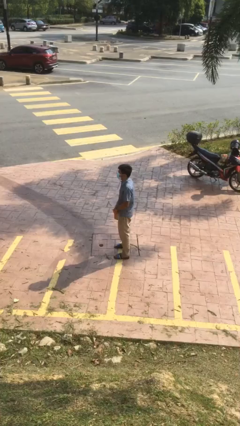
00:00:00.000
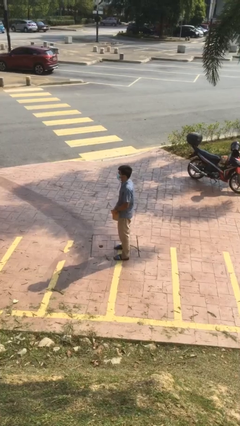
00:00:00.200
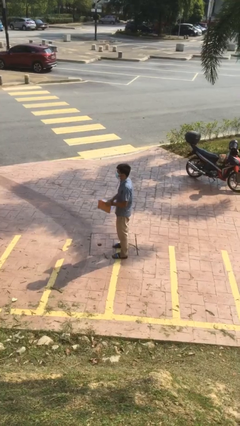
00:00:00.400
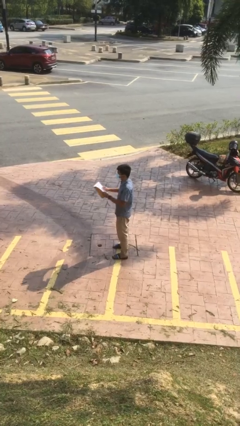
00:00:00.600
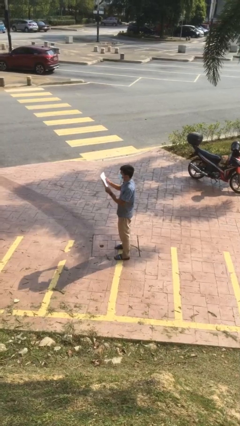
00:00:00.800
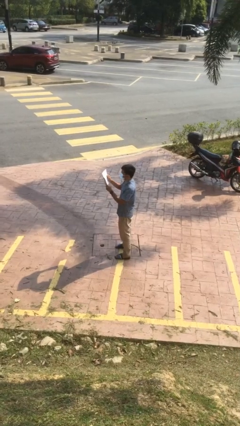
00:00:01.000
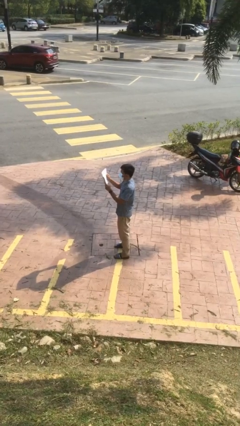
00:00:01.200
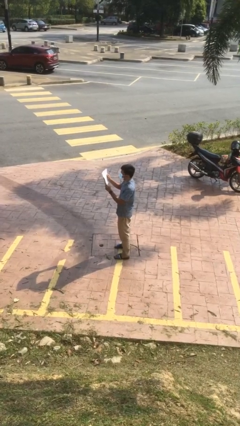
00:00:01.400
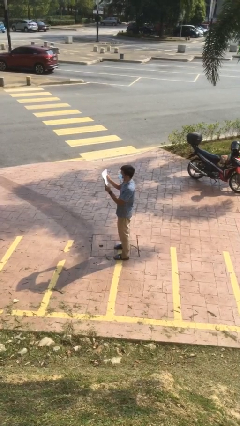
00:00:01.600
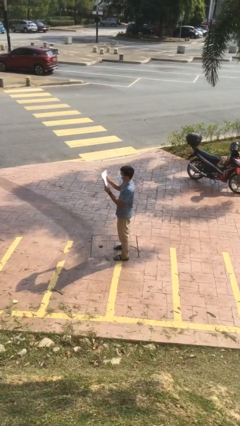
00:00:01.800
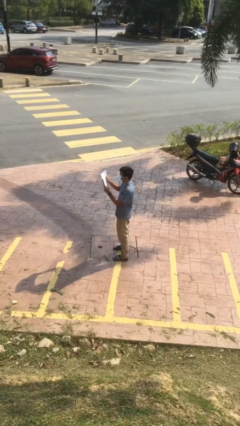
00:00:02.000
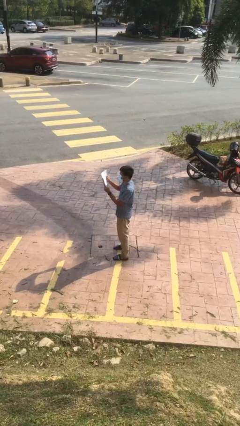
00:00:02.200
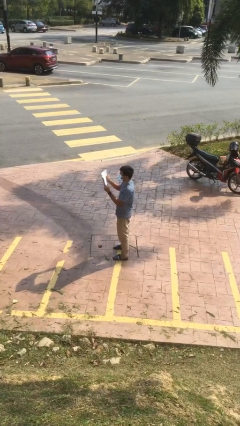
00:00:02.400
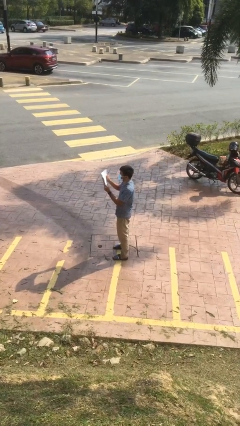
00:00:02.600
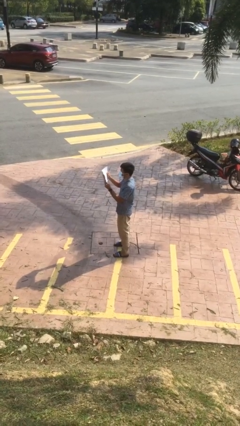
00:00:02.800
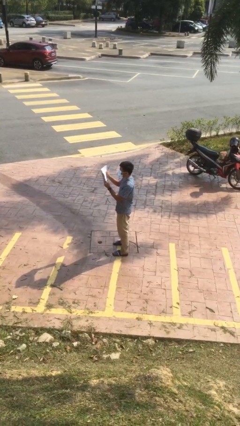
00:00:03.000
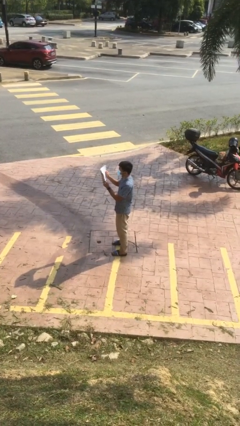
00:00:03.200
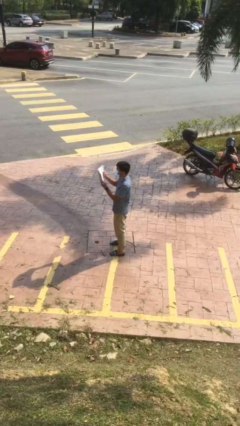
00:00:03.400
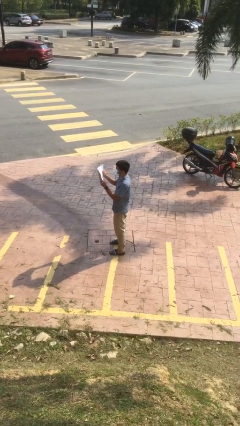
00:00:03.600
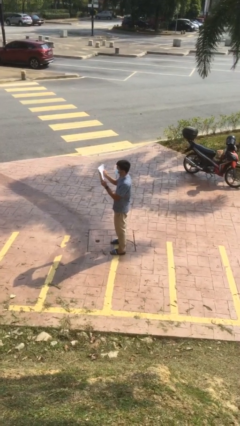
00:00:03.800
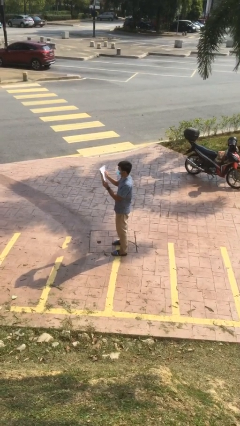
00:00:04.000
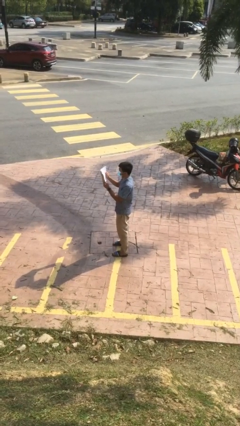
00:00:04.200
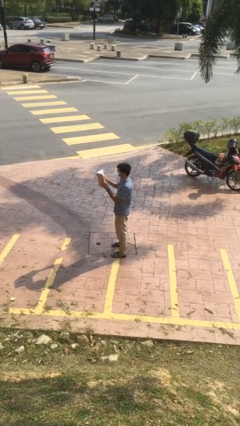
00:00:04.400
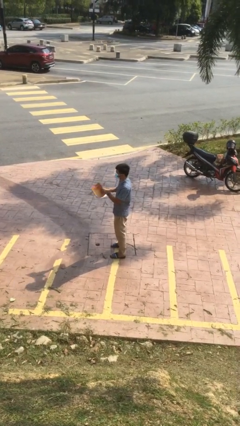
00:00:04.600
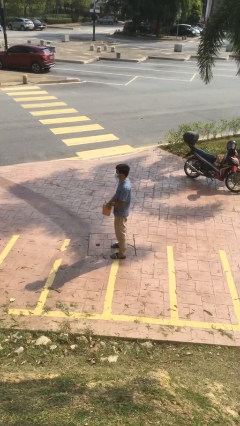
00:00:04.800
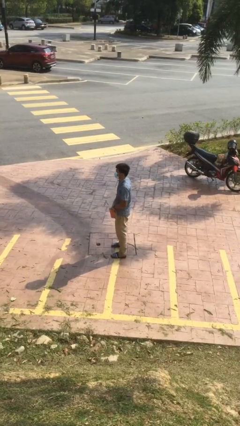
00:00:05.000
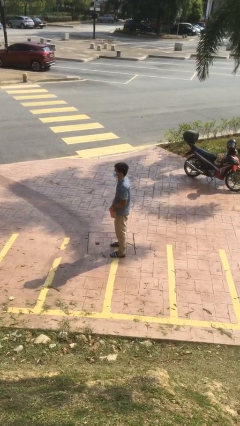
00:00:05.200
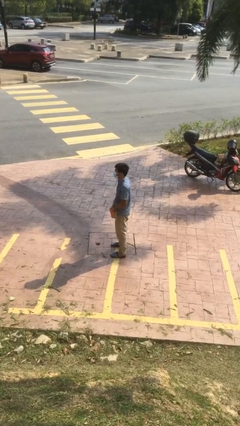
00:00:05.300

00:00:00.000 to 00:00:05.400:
person reads document

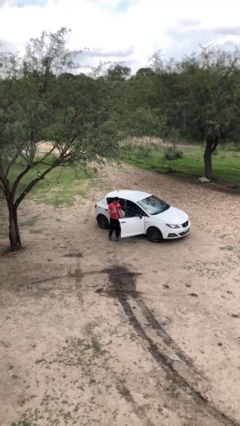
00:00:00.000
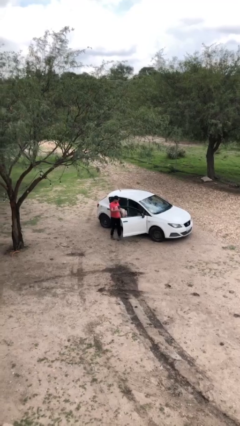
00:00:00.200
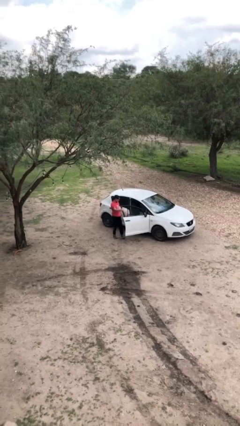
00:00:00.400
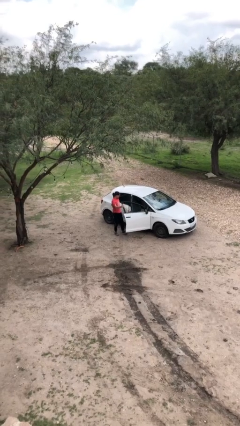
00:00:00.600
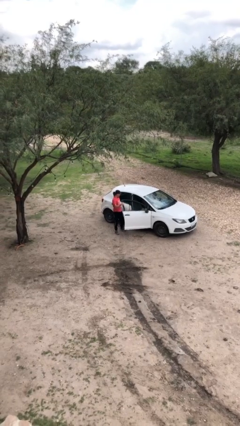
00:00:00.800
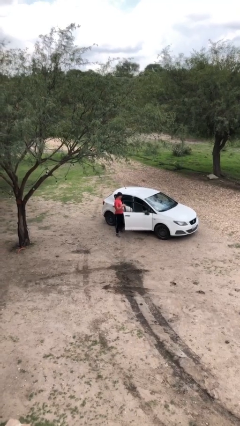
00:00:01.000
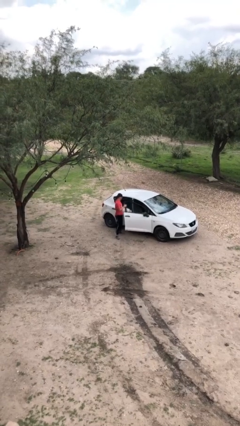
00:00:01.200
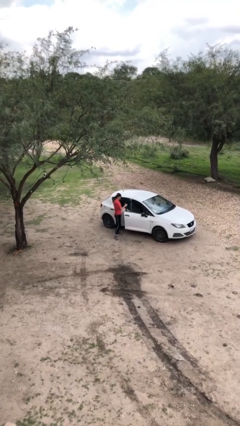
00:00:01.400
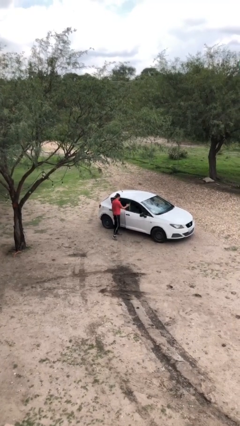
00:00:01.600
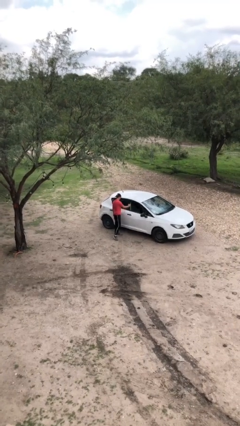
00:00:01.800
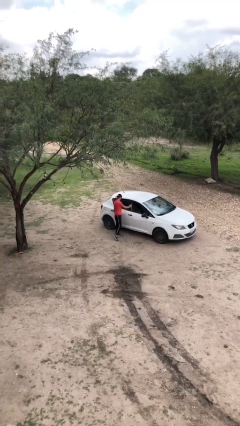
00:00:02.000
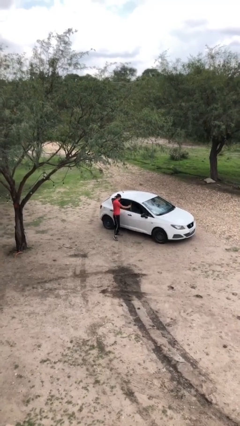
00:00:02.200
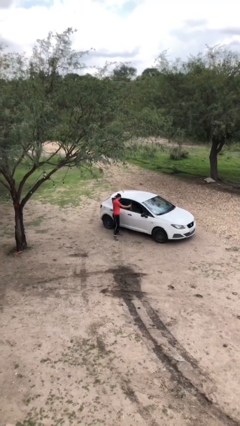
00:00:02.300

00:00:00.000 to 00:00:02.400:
person closes car door

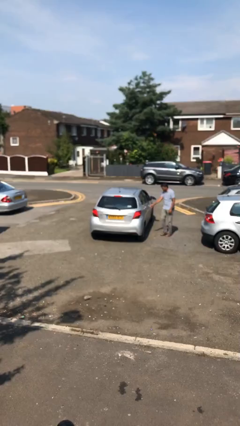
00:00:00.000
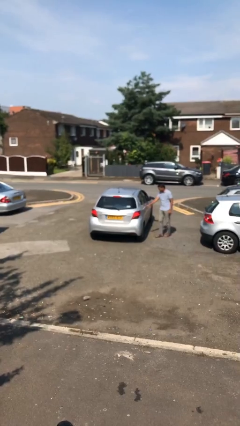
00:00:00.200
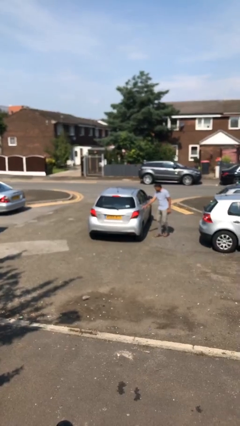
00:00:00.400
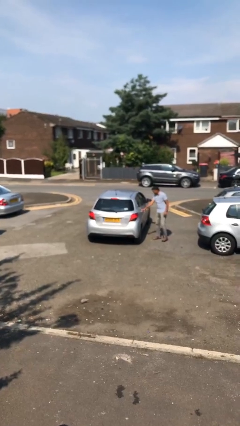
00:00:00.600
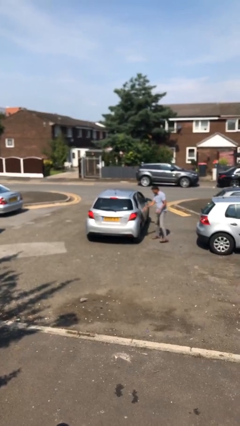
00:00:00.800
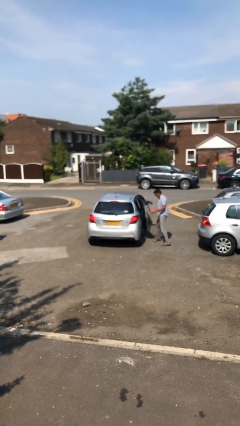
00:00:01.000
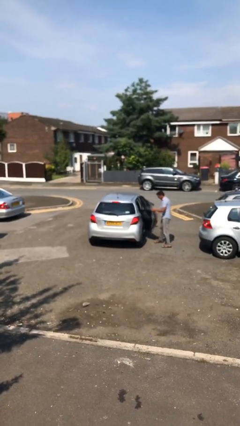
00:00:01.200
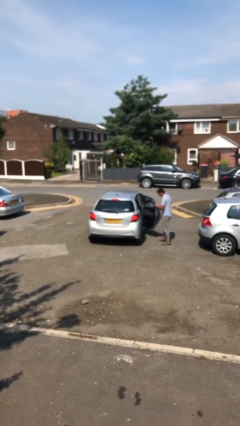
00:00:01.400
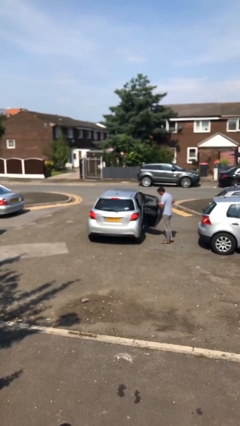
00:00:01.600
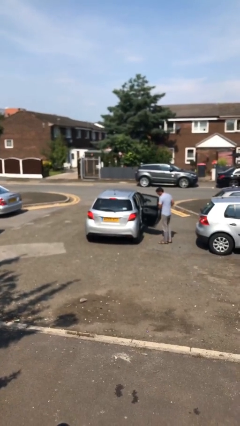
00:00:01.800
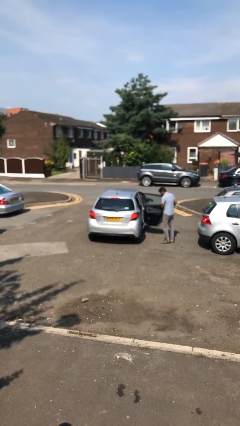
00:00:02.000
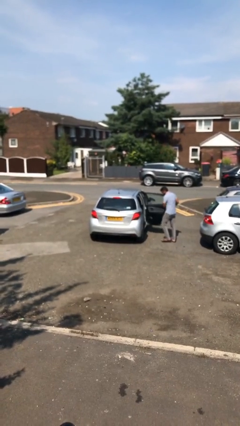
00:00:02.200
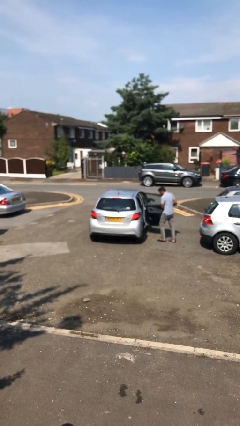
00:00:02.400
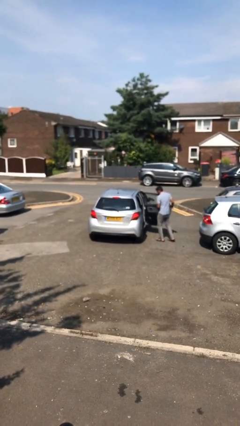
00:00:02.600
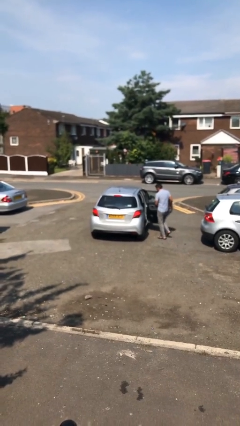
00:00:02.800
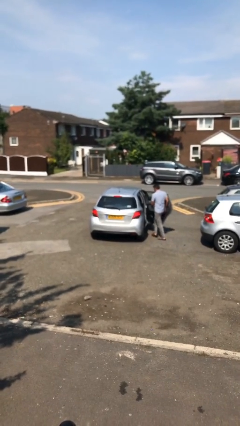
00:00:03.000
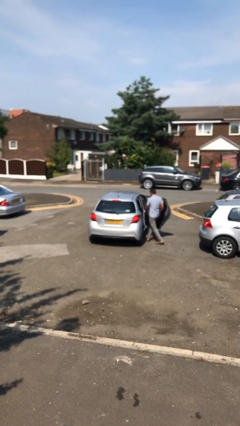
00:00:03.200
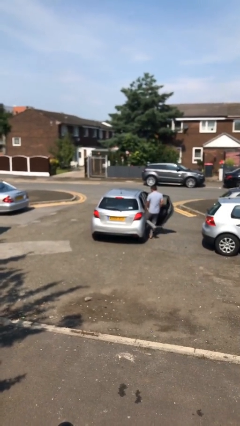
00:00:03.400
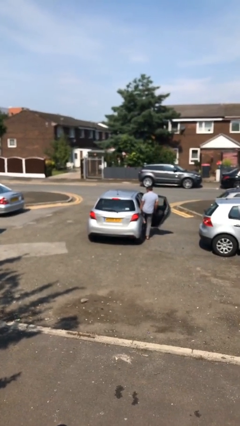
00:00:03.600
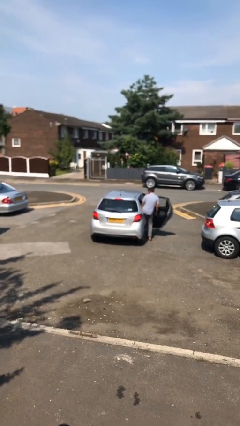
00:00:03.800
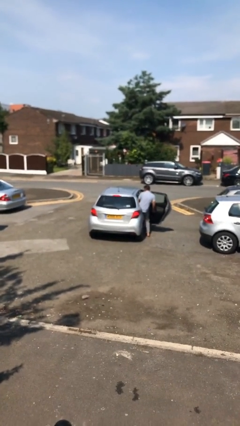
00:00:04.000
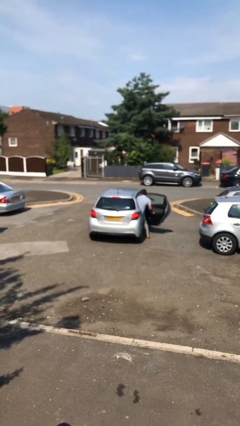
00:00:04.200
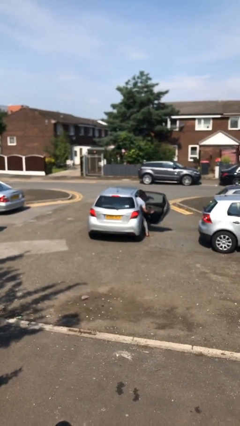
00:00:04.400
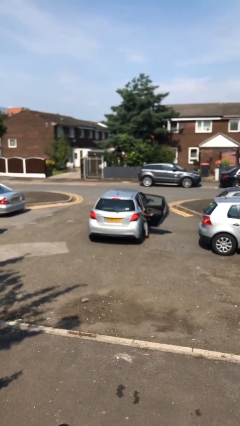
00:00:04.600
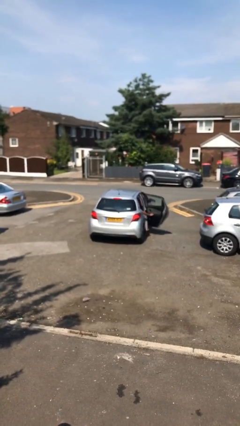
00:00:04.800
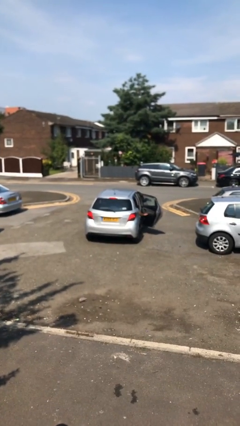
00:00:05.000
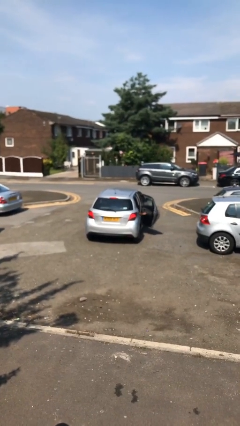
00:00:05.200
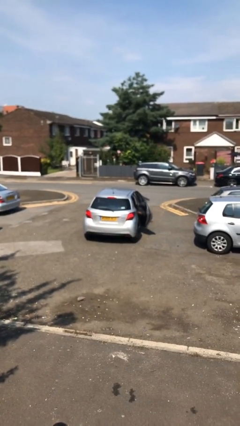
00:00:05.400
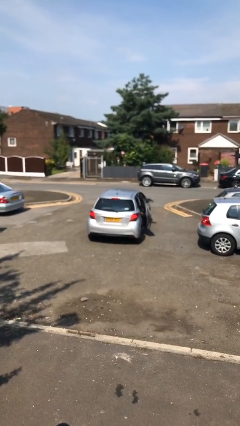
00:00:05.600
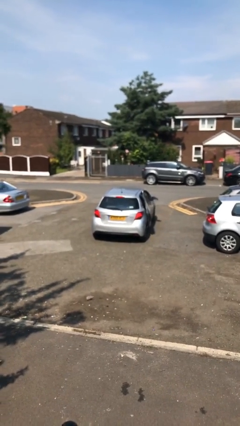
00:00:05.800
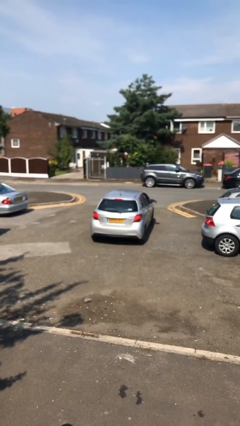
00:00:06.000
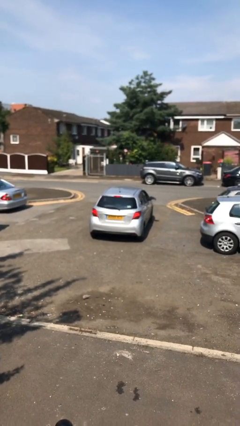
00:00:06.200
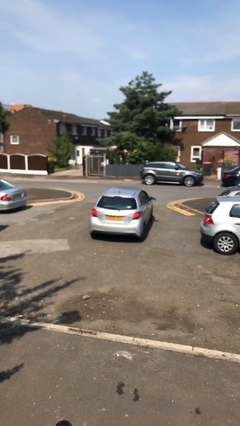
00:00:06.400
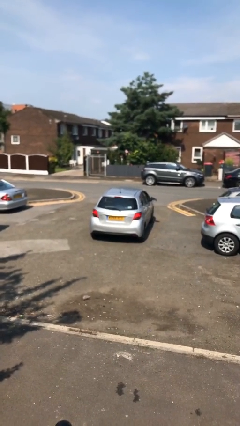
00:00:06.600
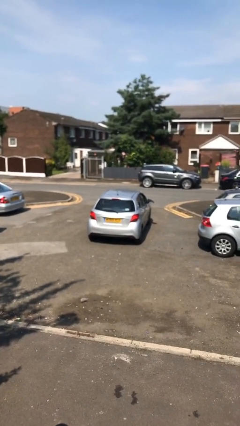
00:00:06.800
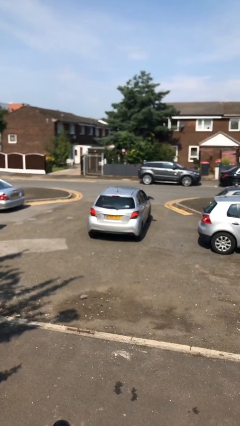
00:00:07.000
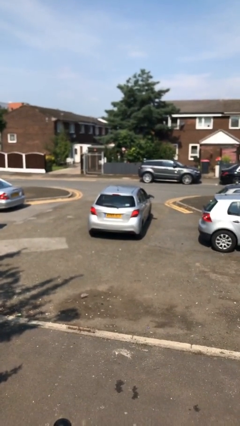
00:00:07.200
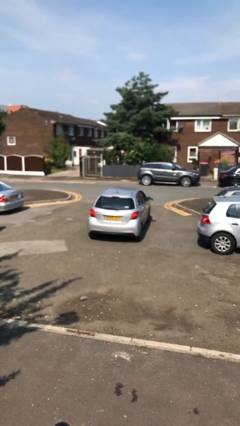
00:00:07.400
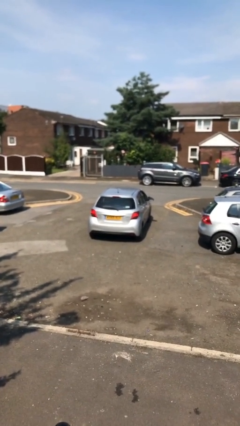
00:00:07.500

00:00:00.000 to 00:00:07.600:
car picks up person

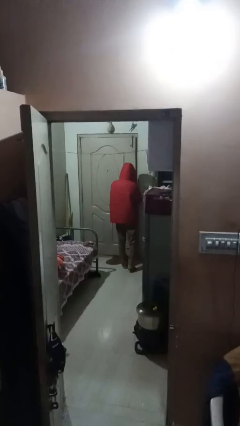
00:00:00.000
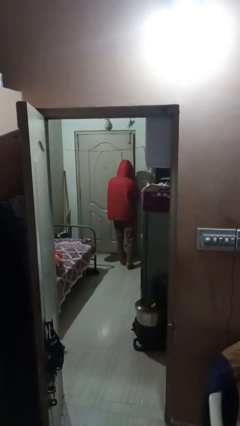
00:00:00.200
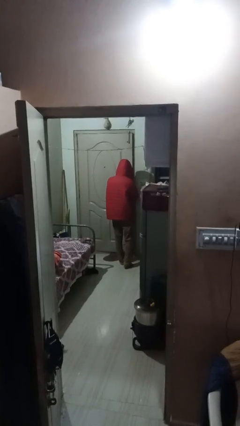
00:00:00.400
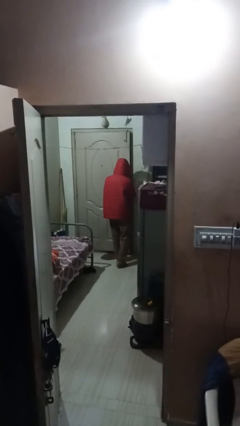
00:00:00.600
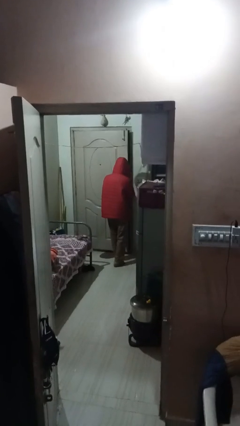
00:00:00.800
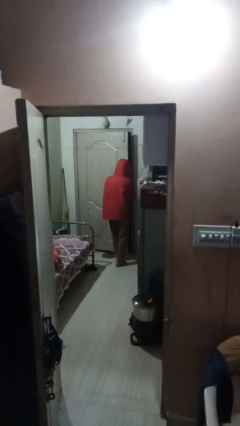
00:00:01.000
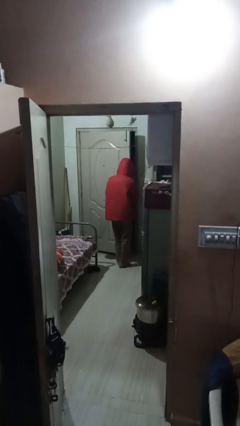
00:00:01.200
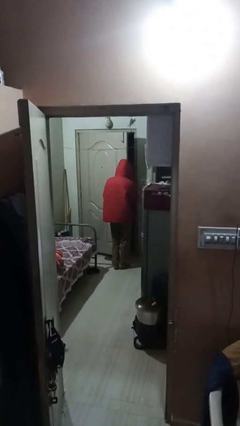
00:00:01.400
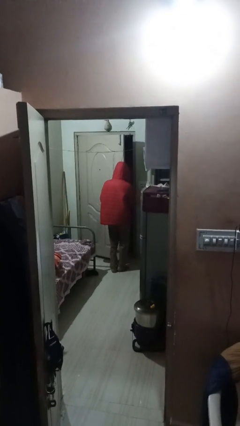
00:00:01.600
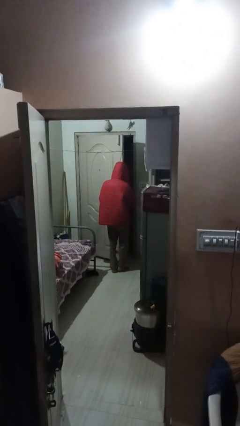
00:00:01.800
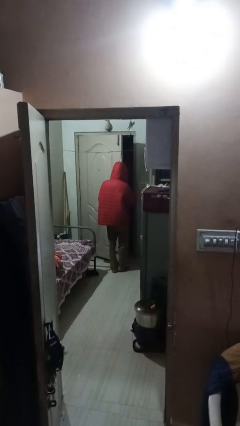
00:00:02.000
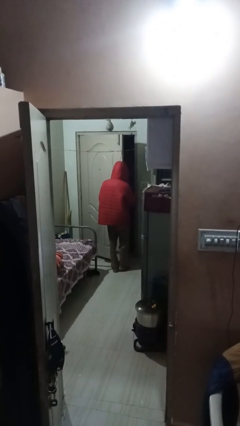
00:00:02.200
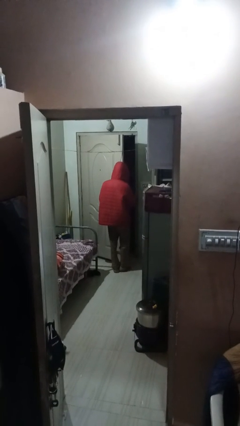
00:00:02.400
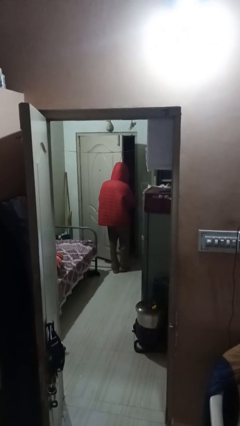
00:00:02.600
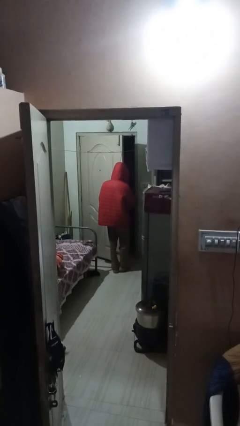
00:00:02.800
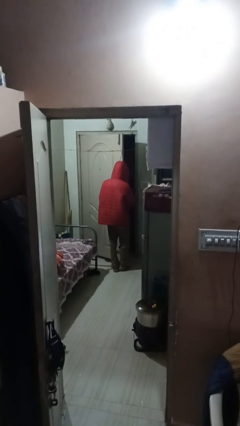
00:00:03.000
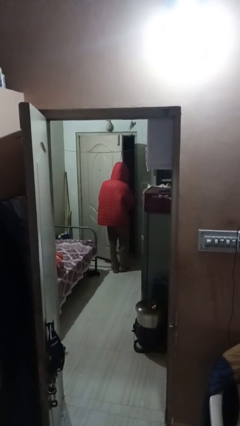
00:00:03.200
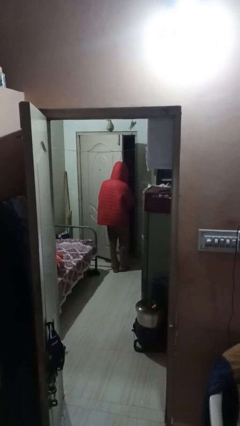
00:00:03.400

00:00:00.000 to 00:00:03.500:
person opens facility door
